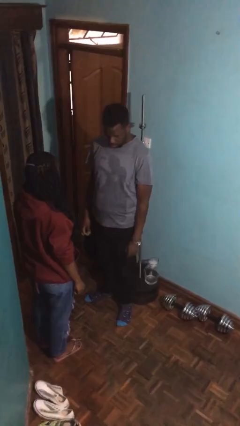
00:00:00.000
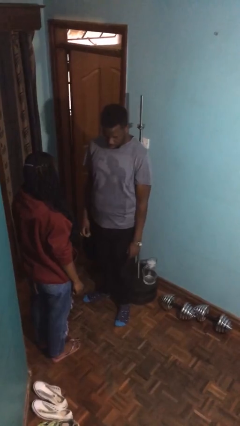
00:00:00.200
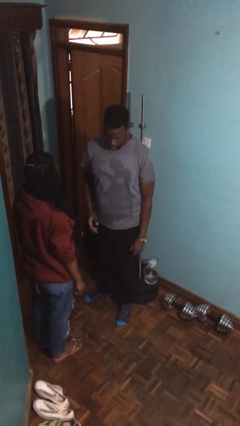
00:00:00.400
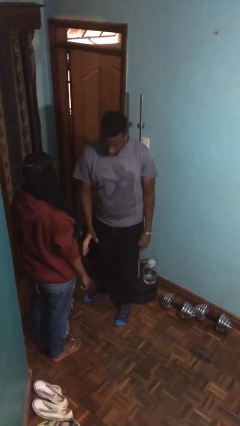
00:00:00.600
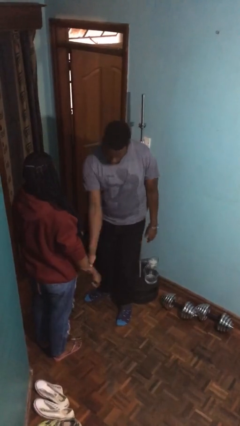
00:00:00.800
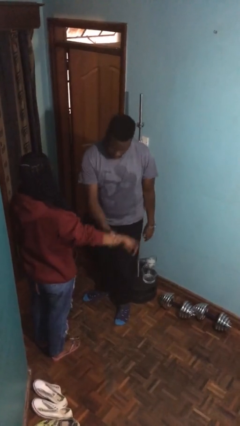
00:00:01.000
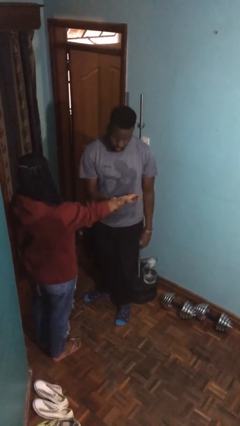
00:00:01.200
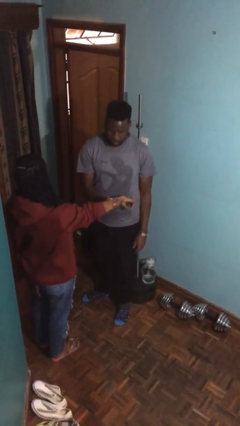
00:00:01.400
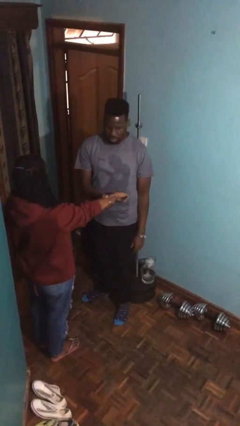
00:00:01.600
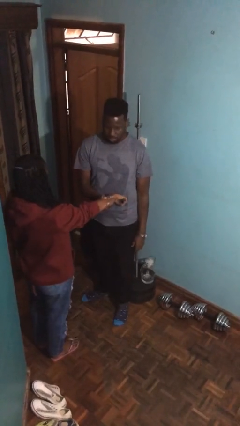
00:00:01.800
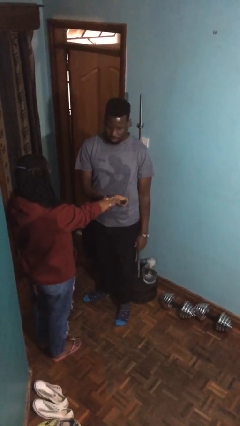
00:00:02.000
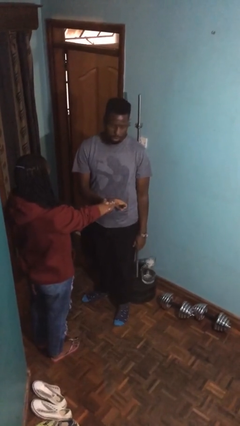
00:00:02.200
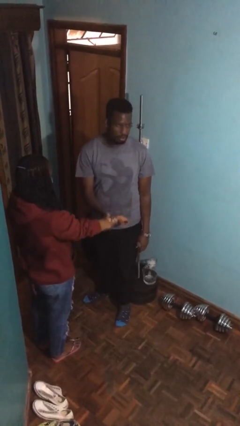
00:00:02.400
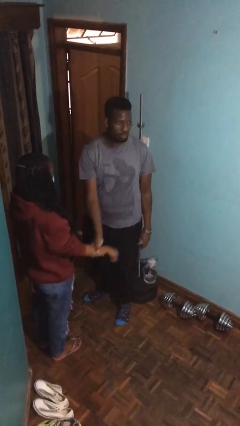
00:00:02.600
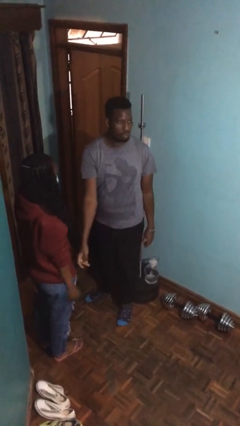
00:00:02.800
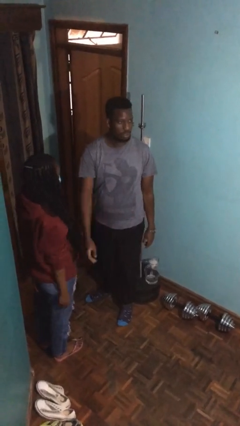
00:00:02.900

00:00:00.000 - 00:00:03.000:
person grabs person by forearm

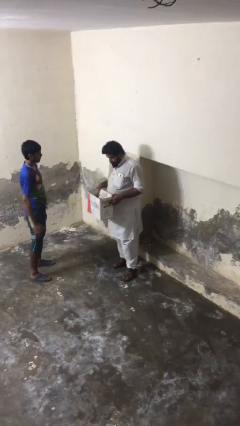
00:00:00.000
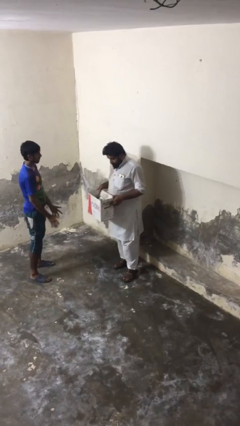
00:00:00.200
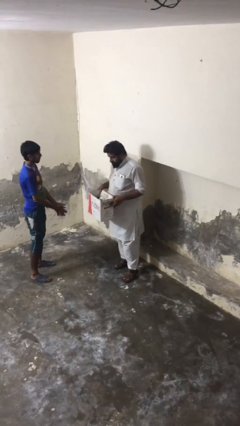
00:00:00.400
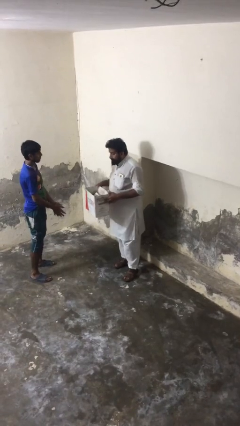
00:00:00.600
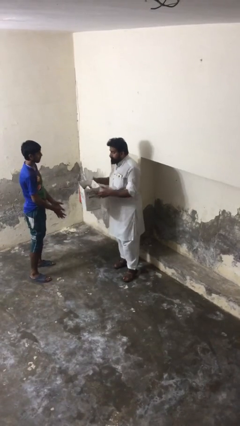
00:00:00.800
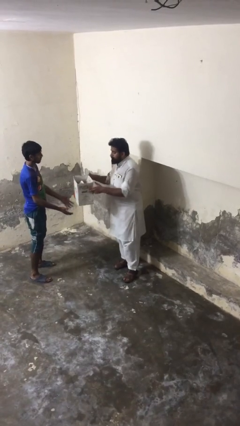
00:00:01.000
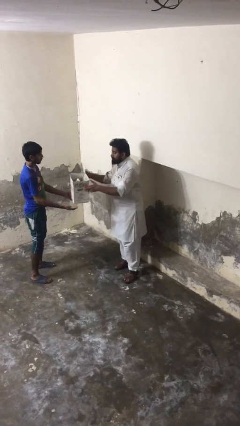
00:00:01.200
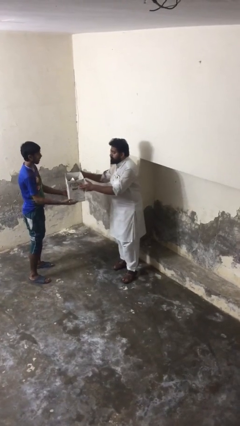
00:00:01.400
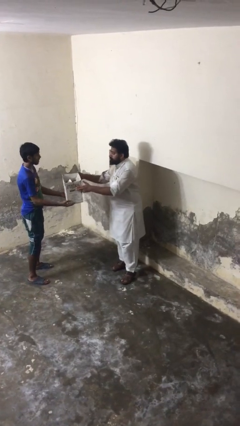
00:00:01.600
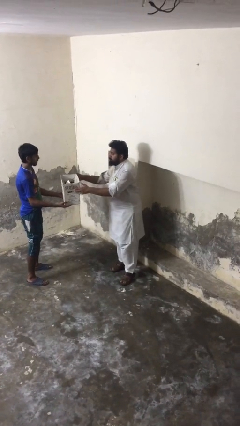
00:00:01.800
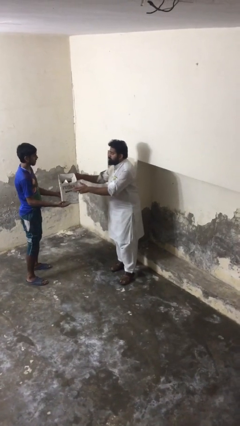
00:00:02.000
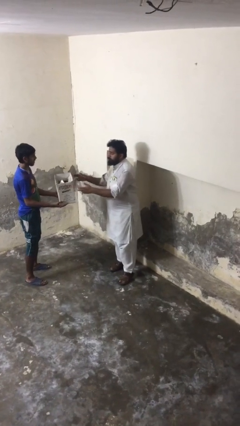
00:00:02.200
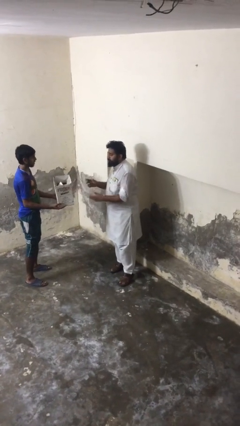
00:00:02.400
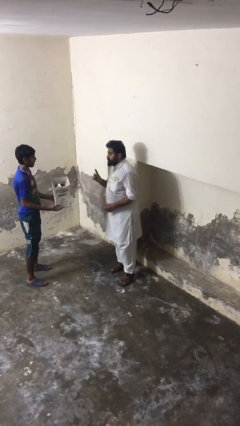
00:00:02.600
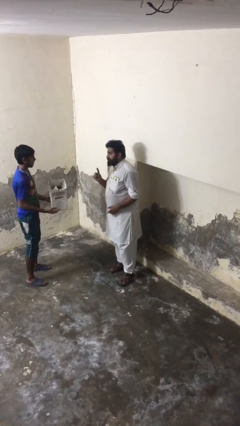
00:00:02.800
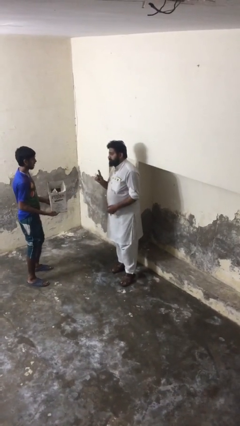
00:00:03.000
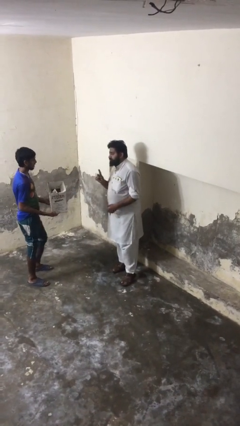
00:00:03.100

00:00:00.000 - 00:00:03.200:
person transfers object to person

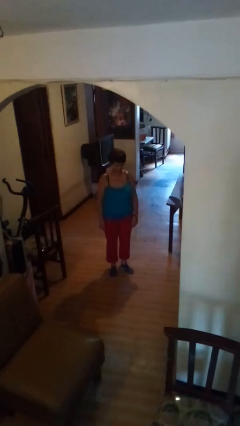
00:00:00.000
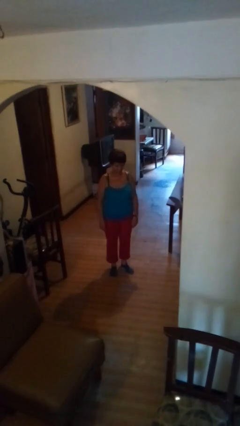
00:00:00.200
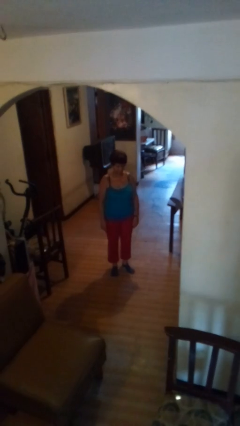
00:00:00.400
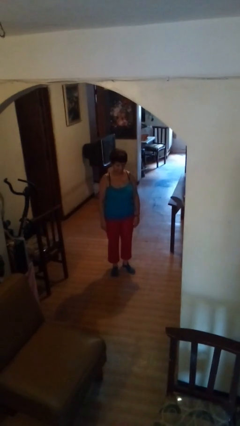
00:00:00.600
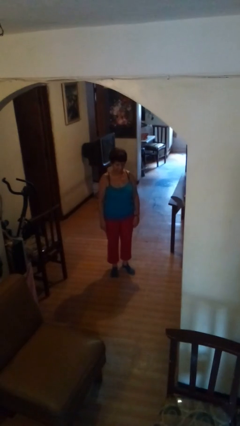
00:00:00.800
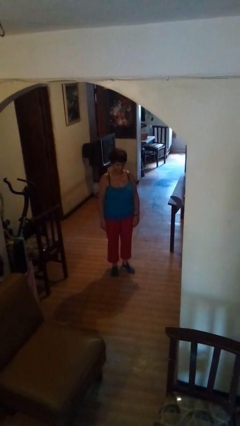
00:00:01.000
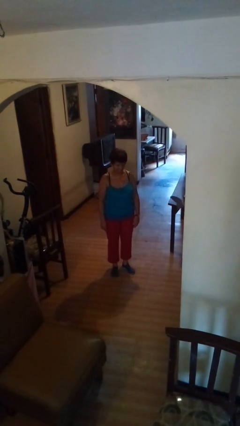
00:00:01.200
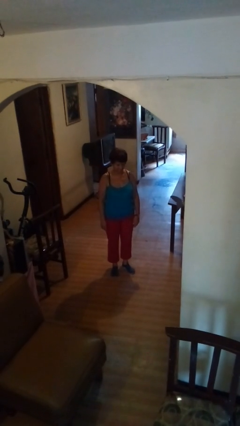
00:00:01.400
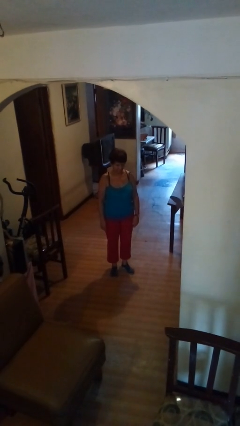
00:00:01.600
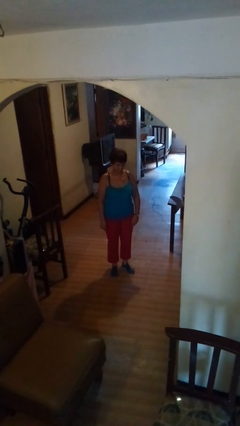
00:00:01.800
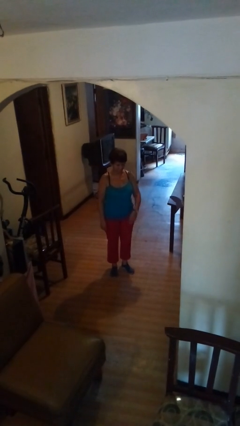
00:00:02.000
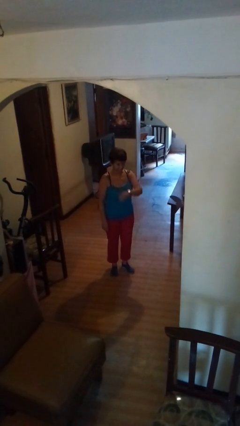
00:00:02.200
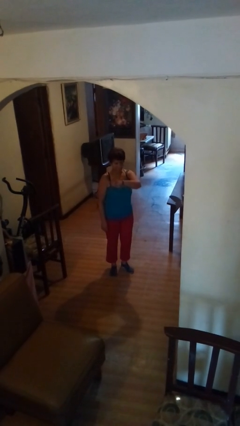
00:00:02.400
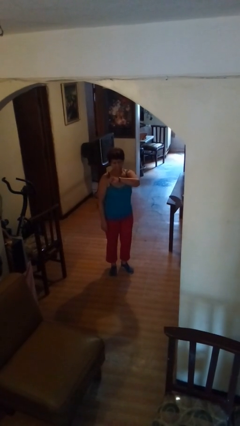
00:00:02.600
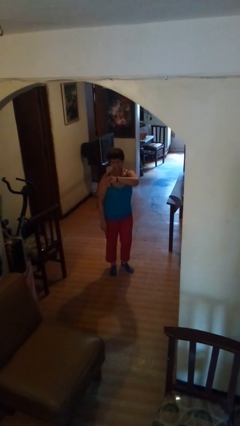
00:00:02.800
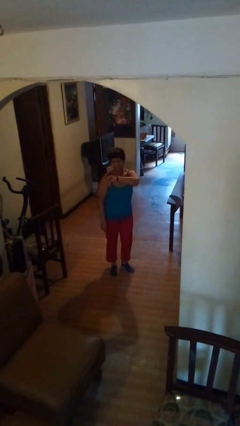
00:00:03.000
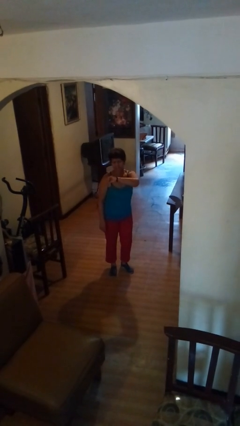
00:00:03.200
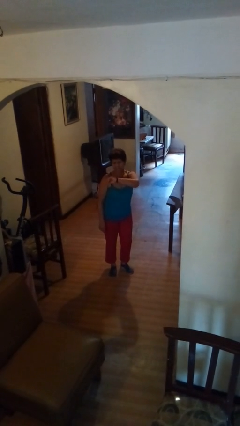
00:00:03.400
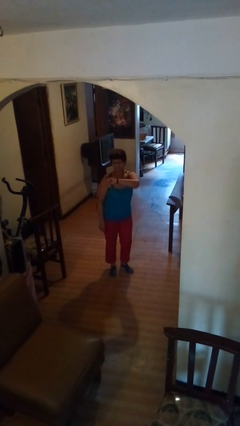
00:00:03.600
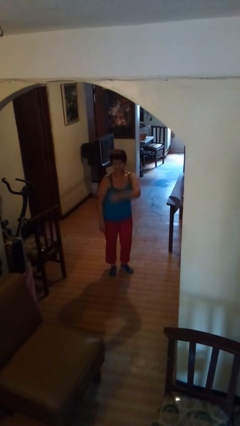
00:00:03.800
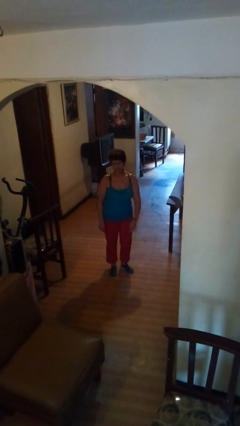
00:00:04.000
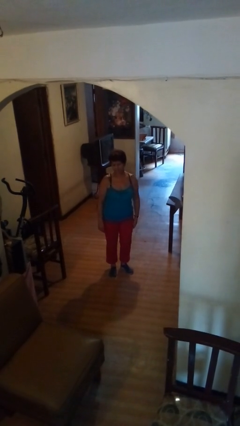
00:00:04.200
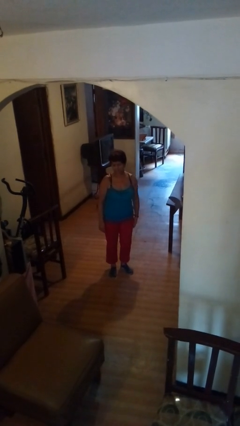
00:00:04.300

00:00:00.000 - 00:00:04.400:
person looks at wristwatch

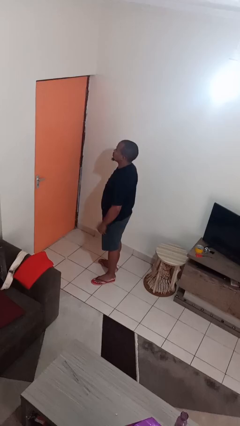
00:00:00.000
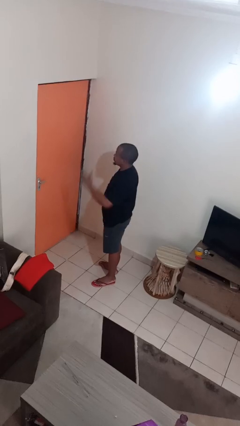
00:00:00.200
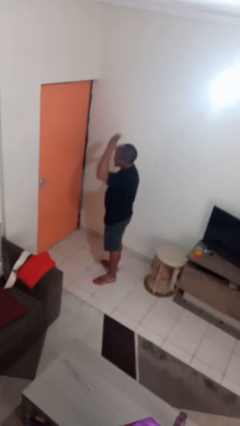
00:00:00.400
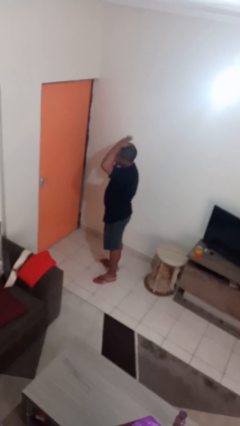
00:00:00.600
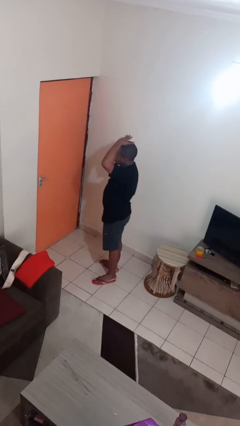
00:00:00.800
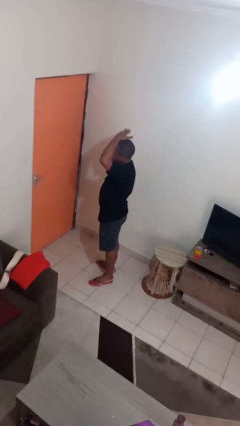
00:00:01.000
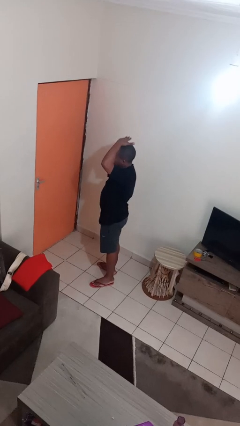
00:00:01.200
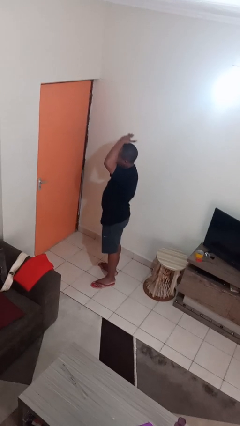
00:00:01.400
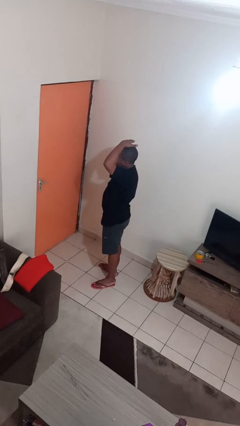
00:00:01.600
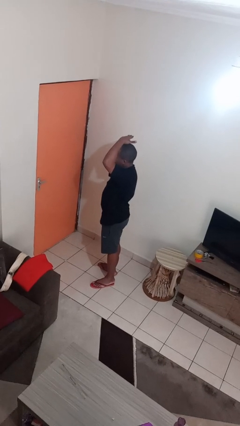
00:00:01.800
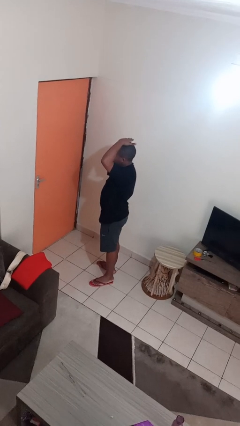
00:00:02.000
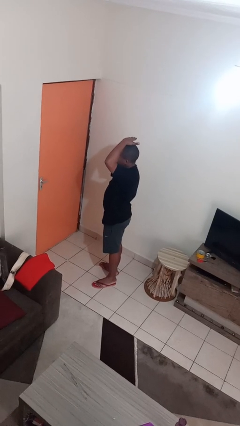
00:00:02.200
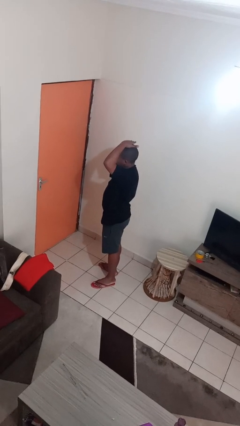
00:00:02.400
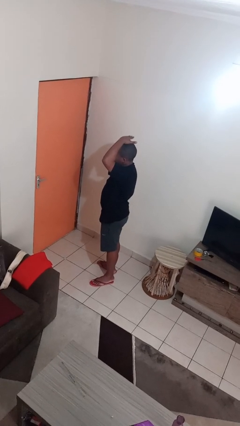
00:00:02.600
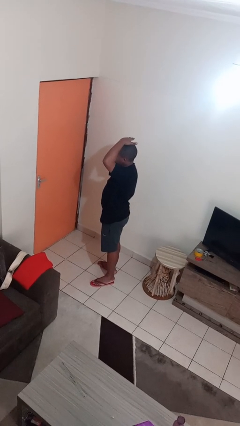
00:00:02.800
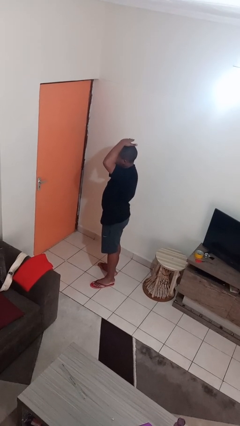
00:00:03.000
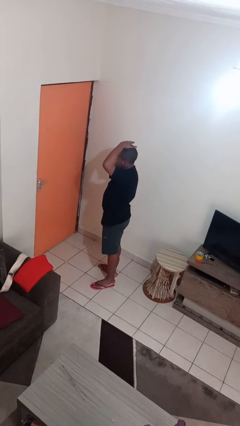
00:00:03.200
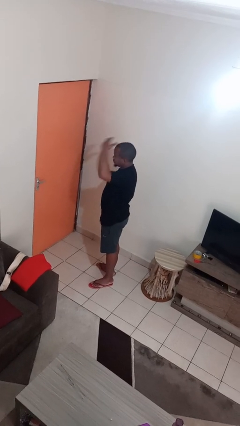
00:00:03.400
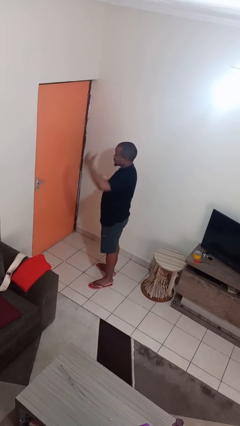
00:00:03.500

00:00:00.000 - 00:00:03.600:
person pats head

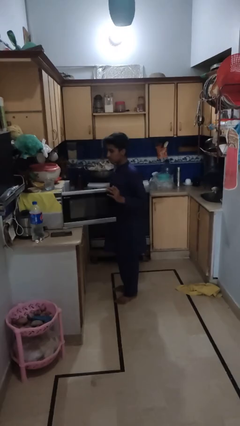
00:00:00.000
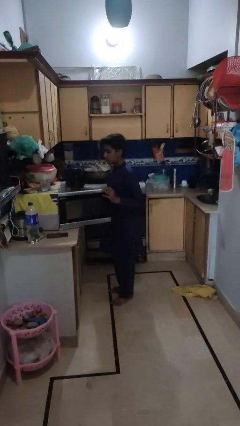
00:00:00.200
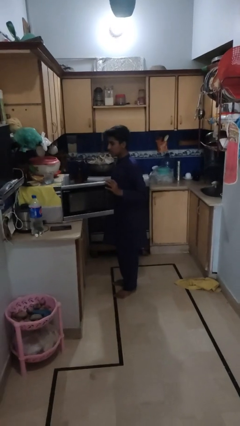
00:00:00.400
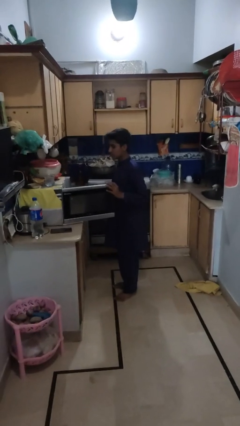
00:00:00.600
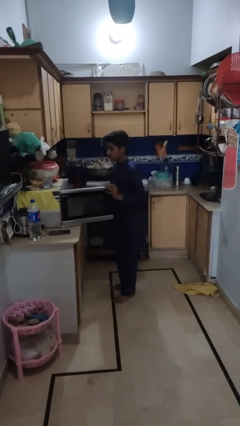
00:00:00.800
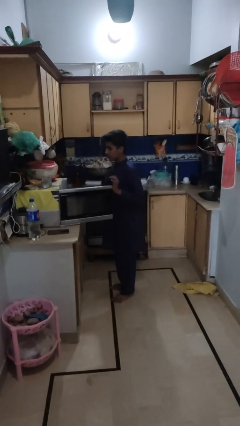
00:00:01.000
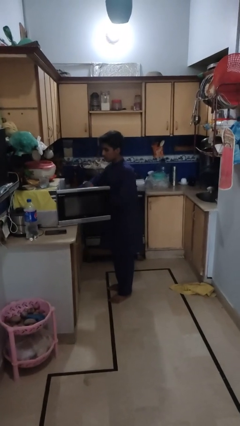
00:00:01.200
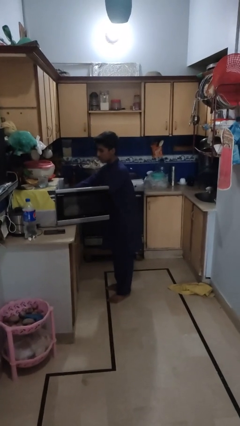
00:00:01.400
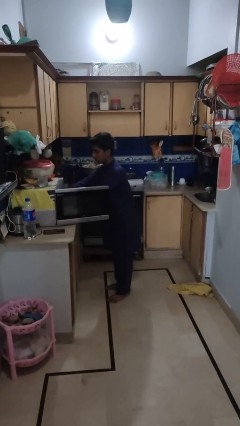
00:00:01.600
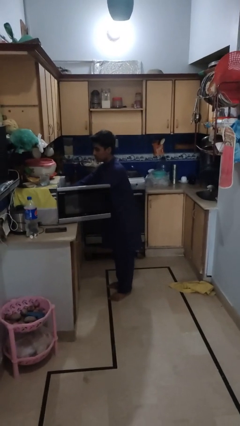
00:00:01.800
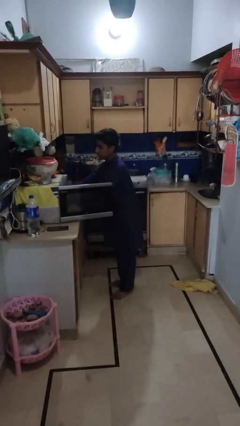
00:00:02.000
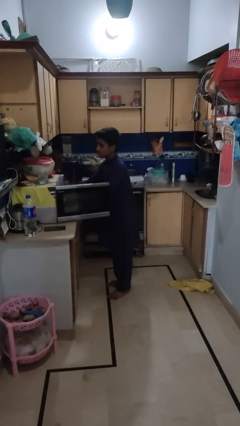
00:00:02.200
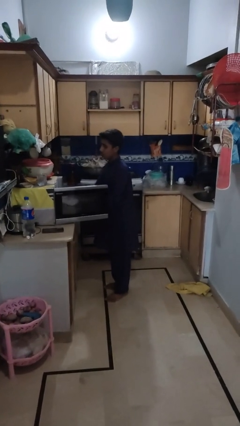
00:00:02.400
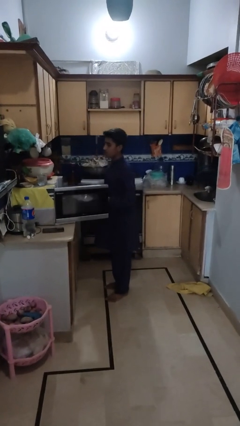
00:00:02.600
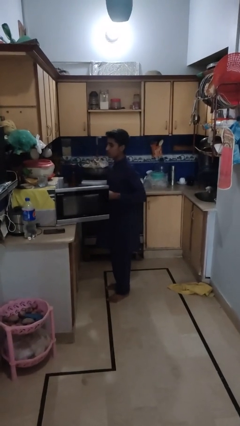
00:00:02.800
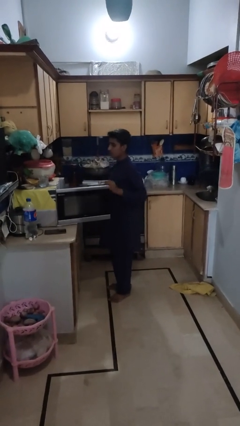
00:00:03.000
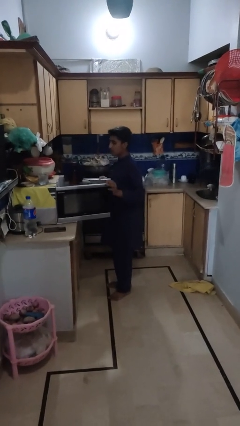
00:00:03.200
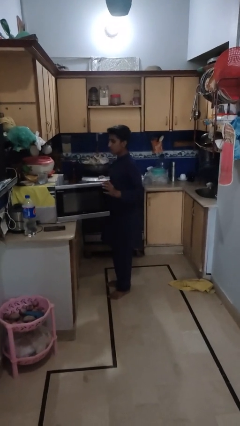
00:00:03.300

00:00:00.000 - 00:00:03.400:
person takes object from microwave
